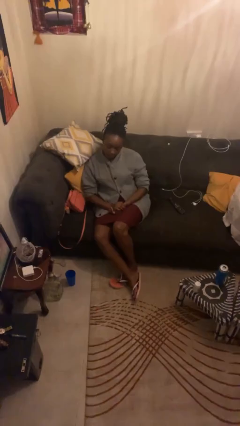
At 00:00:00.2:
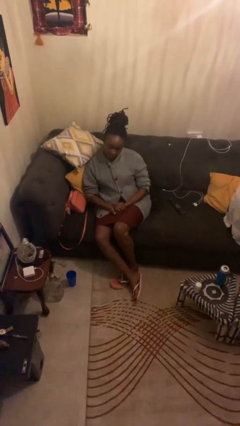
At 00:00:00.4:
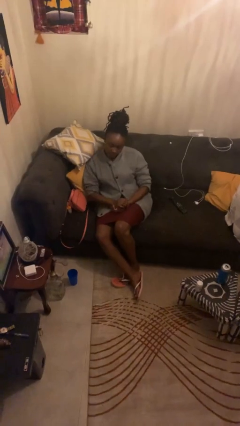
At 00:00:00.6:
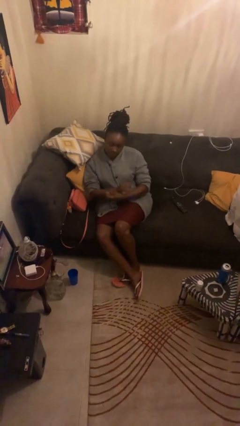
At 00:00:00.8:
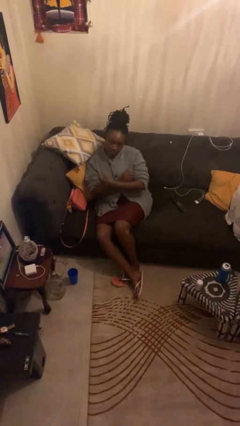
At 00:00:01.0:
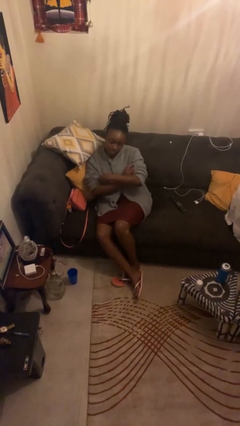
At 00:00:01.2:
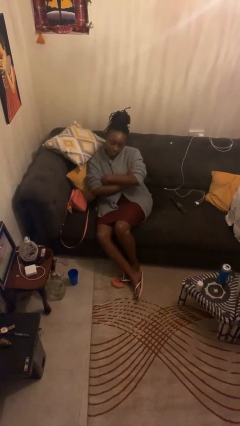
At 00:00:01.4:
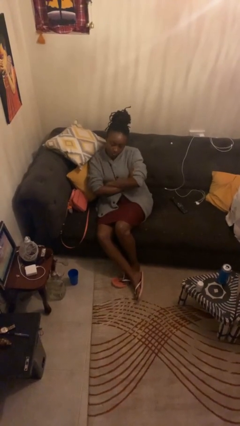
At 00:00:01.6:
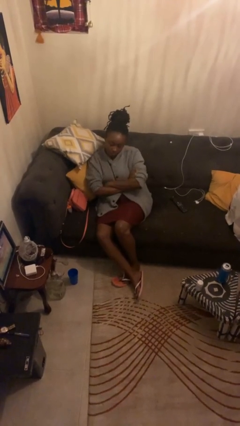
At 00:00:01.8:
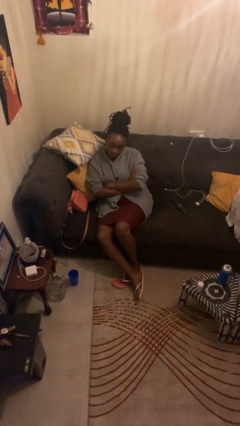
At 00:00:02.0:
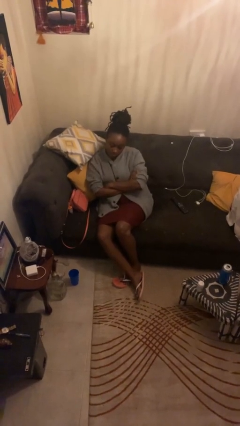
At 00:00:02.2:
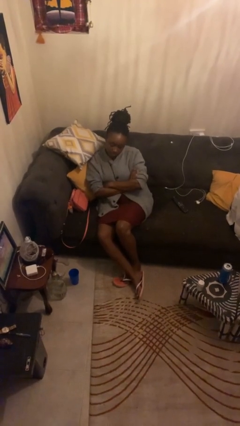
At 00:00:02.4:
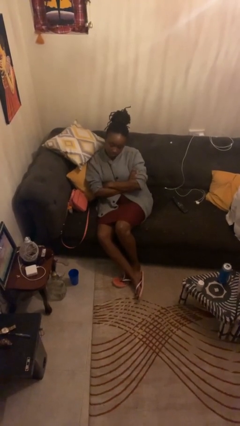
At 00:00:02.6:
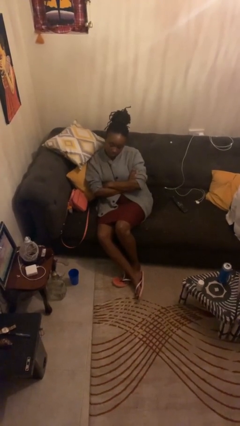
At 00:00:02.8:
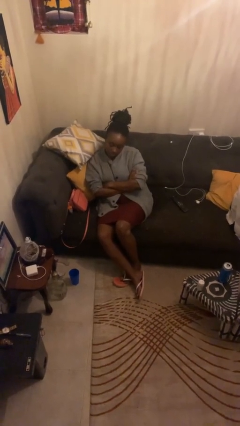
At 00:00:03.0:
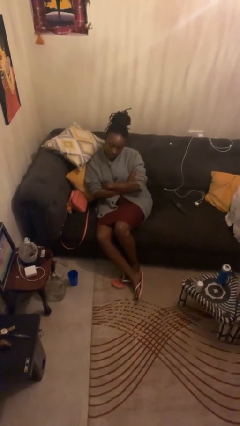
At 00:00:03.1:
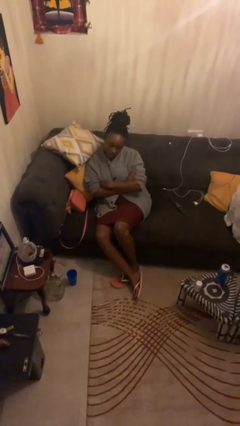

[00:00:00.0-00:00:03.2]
person crosses arms

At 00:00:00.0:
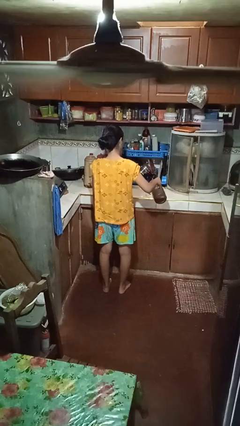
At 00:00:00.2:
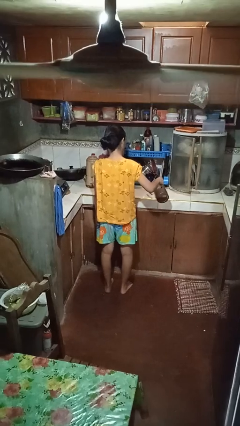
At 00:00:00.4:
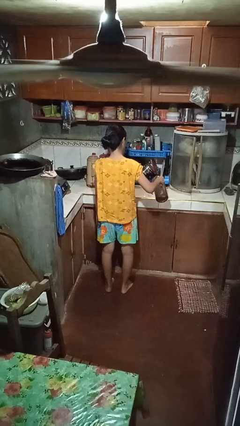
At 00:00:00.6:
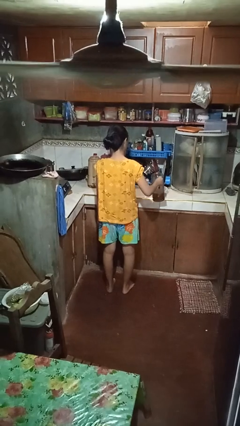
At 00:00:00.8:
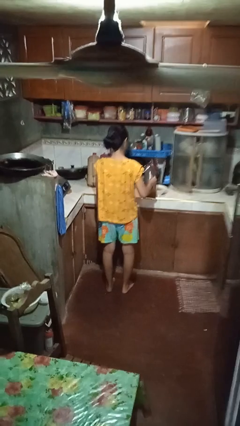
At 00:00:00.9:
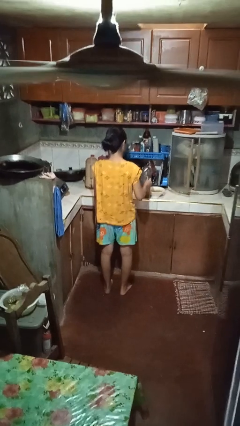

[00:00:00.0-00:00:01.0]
person pours into bowl

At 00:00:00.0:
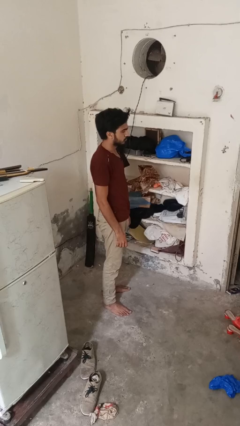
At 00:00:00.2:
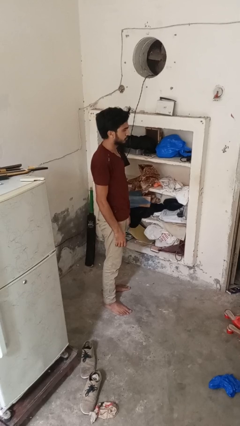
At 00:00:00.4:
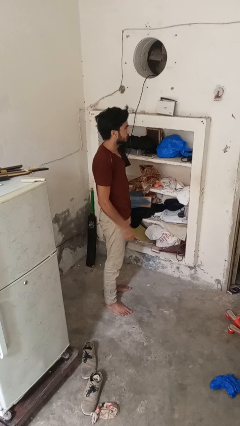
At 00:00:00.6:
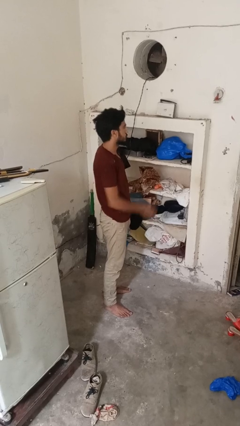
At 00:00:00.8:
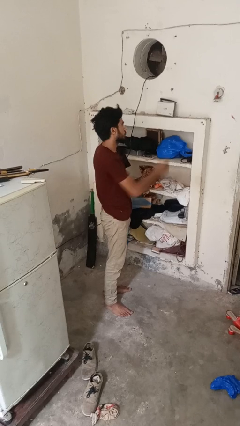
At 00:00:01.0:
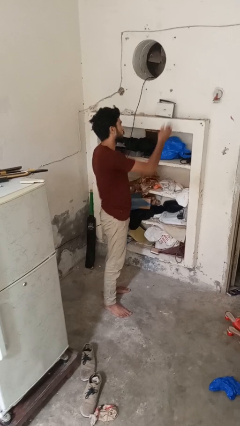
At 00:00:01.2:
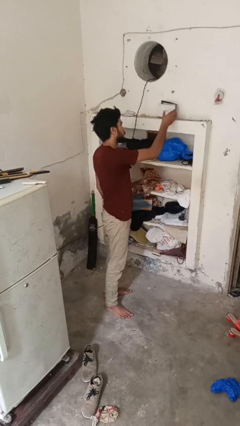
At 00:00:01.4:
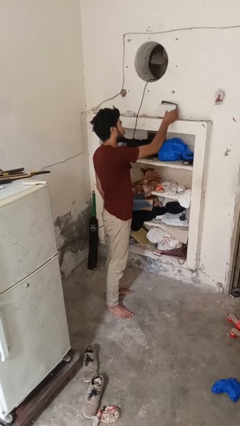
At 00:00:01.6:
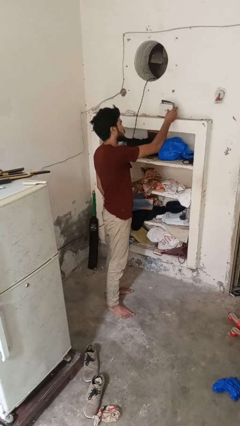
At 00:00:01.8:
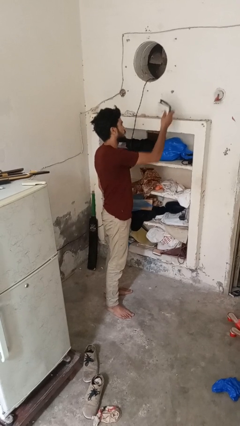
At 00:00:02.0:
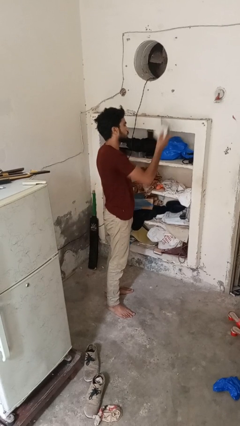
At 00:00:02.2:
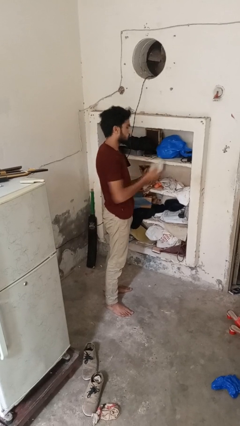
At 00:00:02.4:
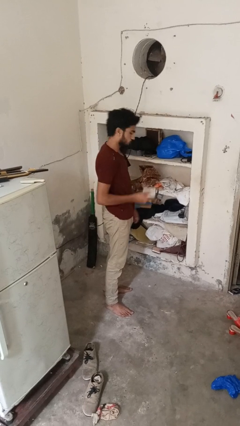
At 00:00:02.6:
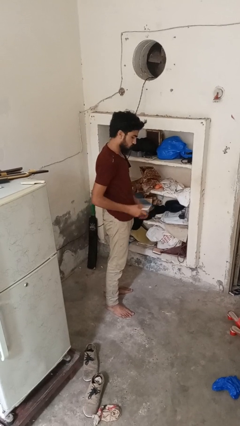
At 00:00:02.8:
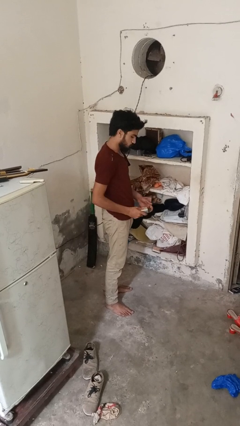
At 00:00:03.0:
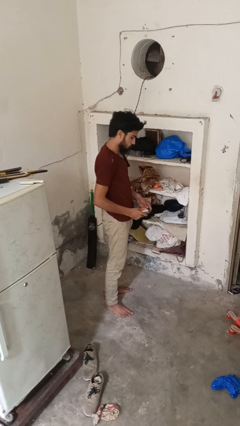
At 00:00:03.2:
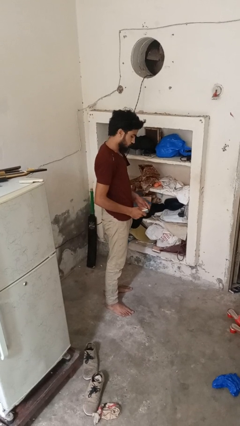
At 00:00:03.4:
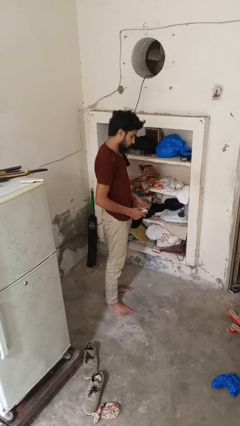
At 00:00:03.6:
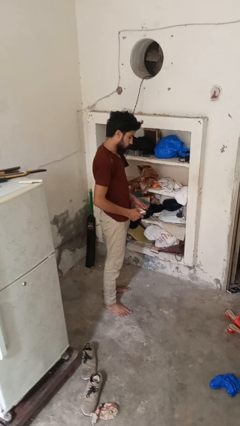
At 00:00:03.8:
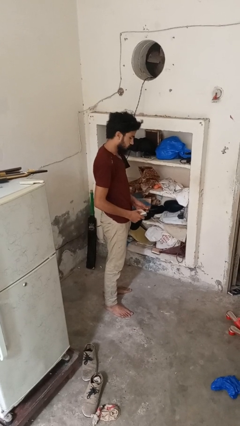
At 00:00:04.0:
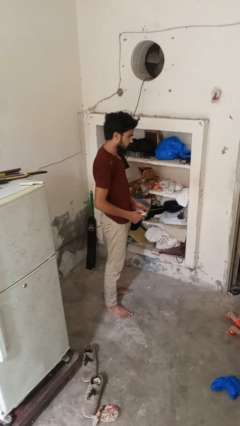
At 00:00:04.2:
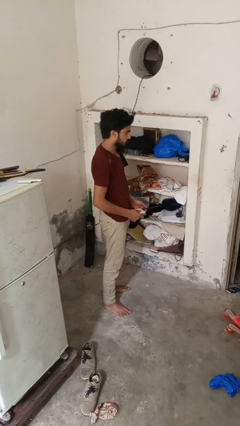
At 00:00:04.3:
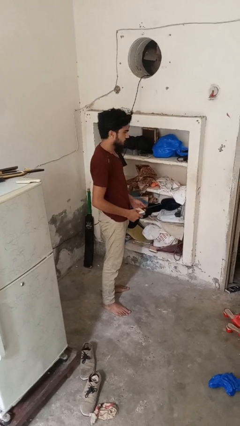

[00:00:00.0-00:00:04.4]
person picks up object from shelf

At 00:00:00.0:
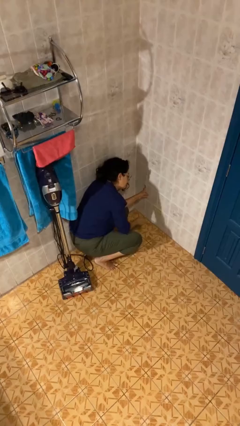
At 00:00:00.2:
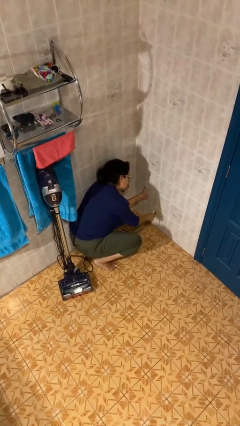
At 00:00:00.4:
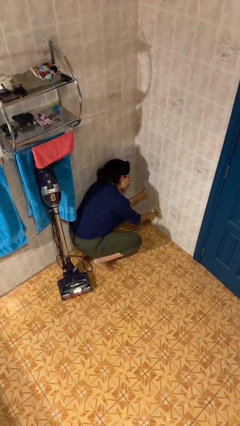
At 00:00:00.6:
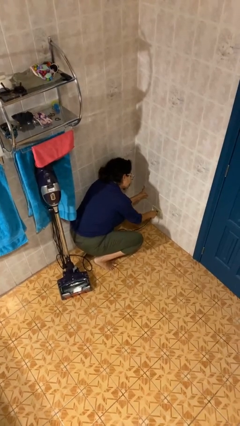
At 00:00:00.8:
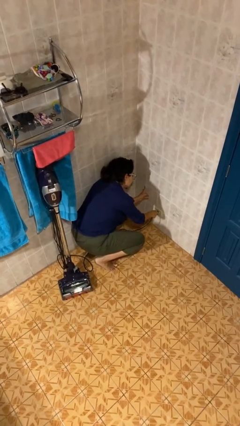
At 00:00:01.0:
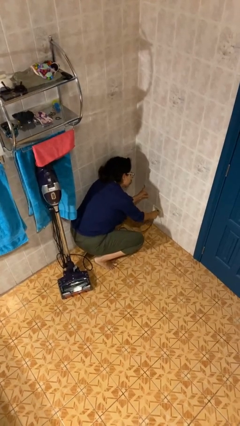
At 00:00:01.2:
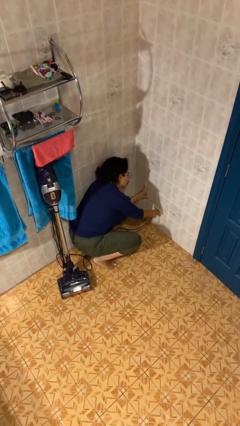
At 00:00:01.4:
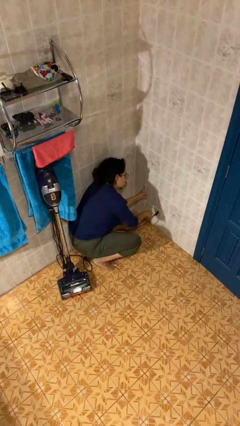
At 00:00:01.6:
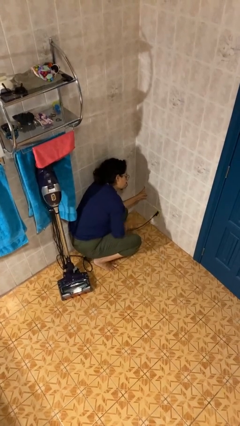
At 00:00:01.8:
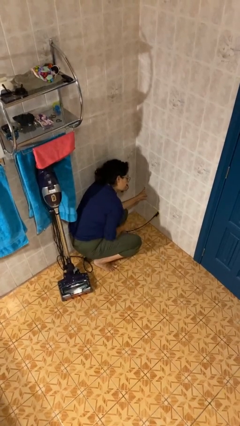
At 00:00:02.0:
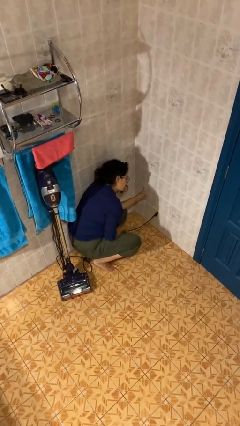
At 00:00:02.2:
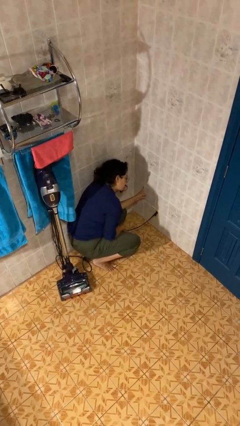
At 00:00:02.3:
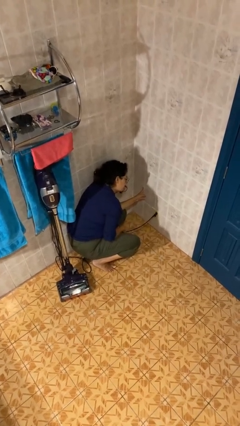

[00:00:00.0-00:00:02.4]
person plugs into electrical socket

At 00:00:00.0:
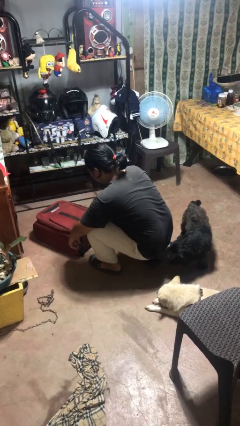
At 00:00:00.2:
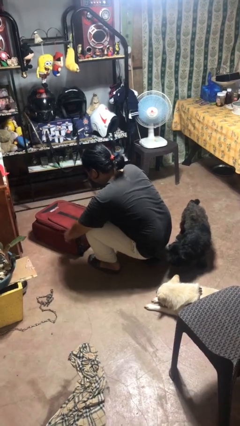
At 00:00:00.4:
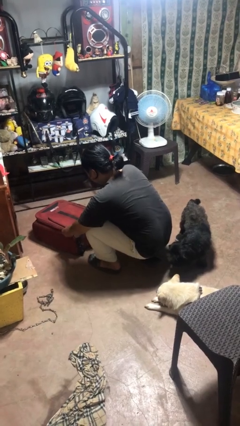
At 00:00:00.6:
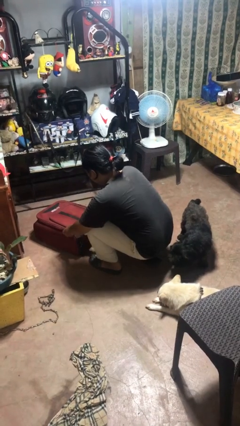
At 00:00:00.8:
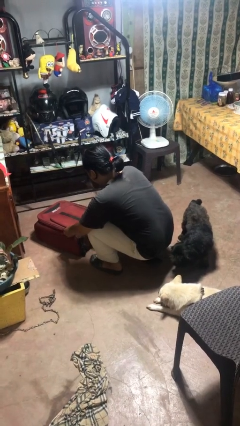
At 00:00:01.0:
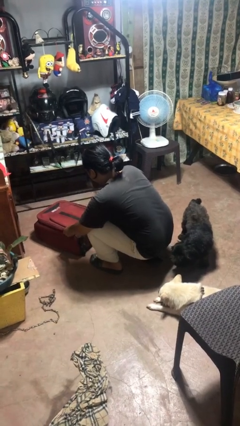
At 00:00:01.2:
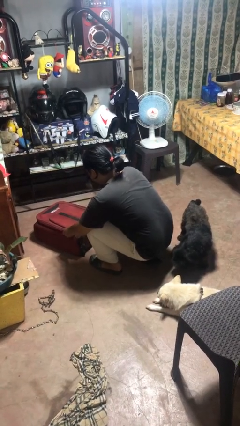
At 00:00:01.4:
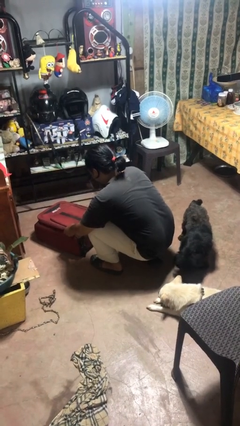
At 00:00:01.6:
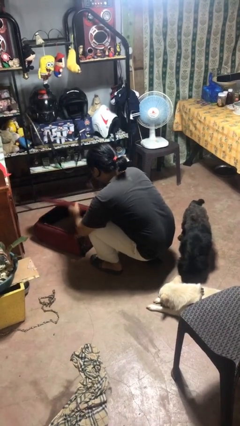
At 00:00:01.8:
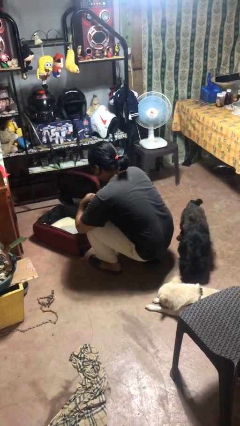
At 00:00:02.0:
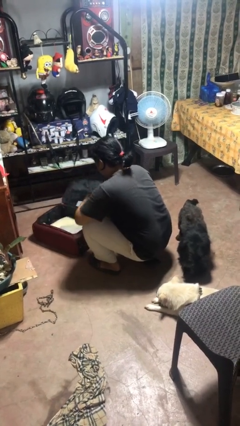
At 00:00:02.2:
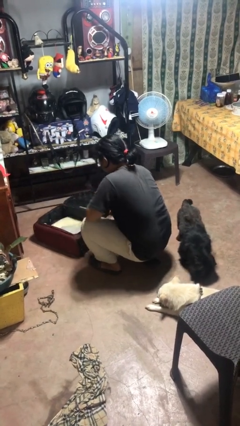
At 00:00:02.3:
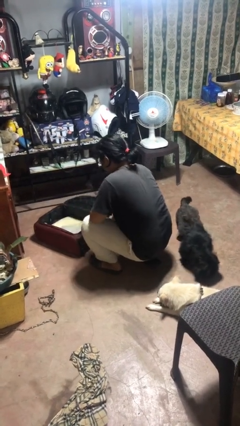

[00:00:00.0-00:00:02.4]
person opens suitcase

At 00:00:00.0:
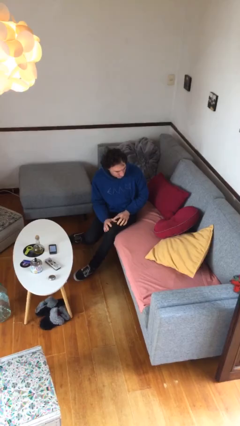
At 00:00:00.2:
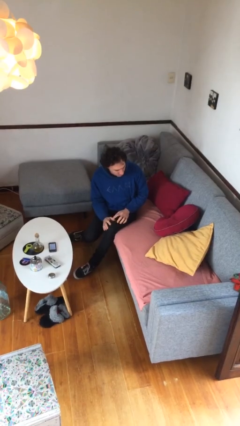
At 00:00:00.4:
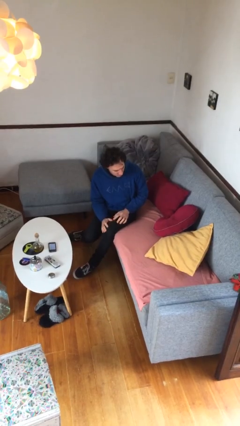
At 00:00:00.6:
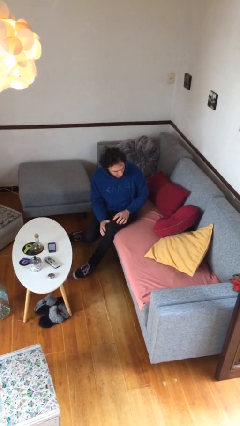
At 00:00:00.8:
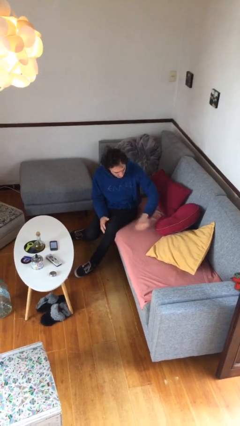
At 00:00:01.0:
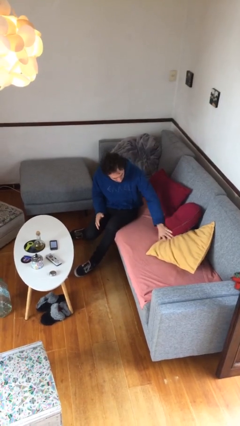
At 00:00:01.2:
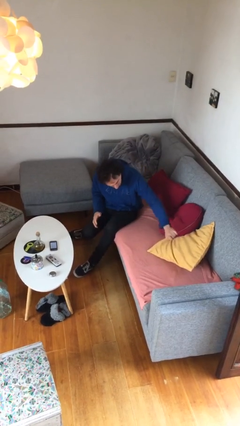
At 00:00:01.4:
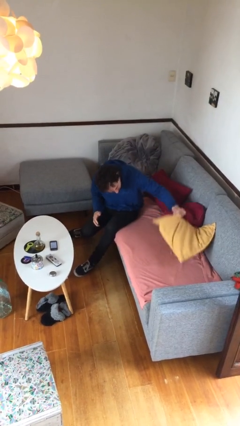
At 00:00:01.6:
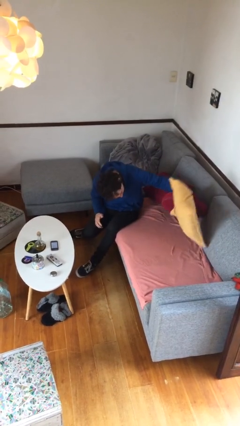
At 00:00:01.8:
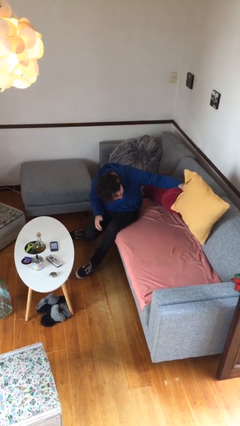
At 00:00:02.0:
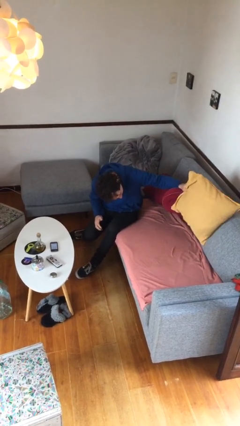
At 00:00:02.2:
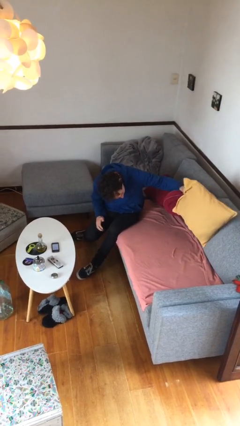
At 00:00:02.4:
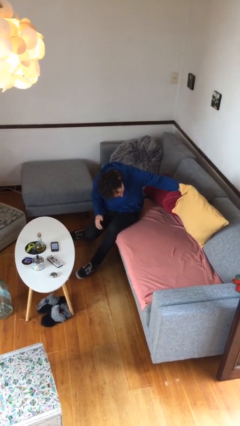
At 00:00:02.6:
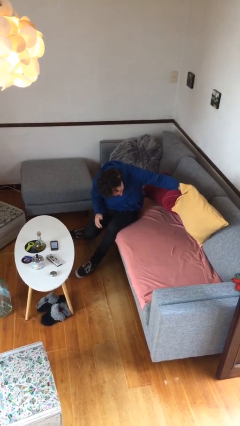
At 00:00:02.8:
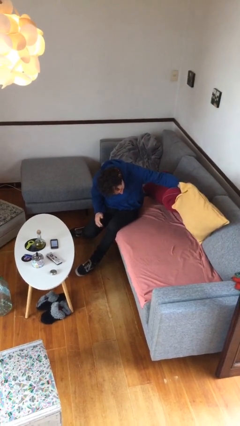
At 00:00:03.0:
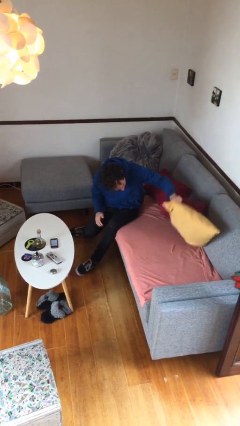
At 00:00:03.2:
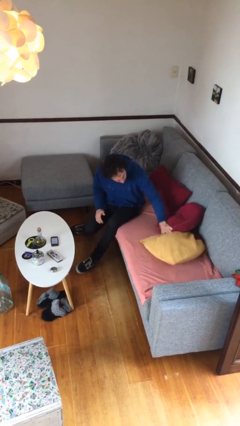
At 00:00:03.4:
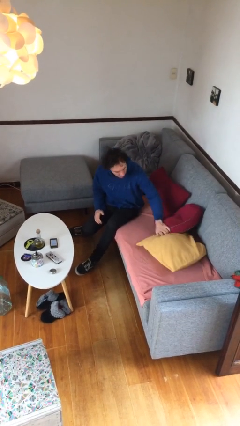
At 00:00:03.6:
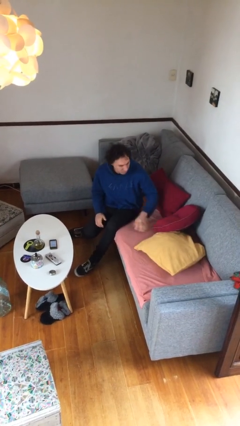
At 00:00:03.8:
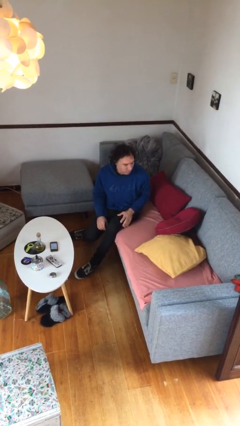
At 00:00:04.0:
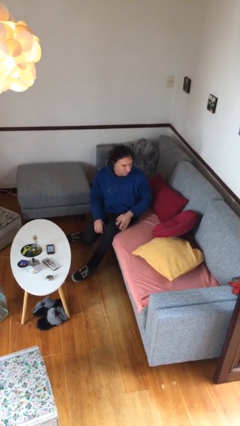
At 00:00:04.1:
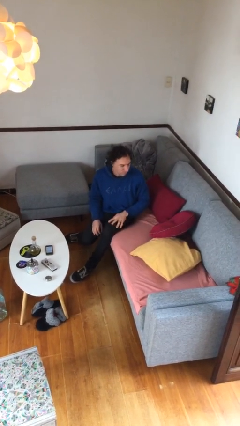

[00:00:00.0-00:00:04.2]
person searches in couch
